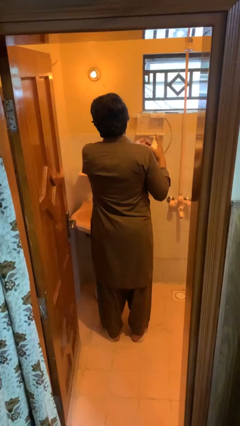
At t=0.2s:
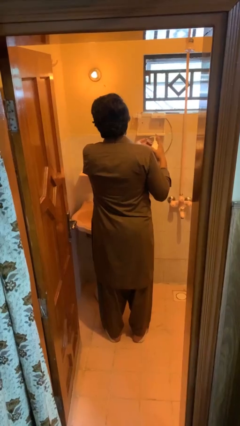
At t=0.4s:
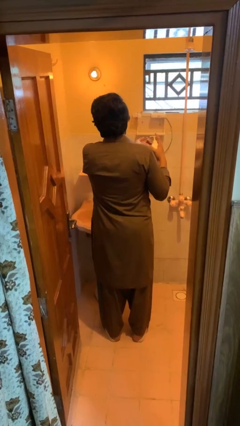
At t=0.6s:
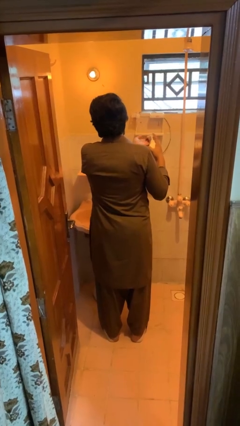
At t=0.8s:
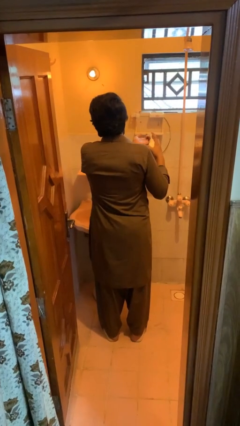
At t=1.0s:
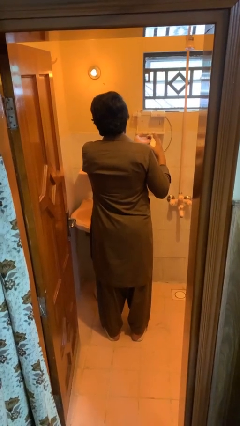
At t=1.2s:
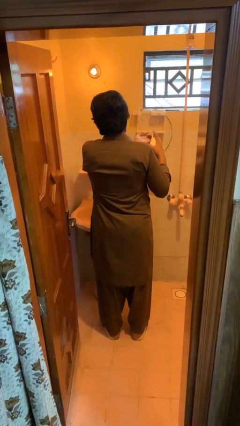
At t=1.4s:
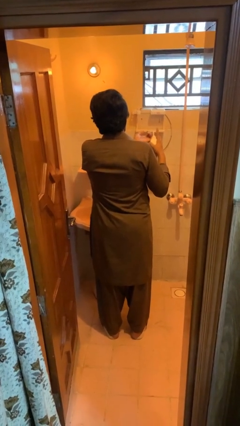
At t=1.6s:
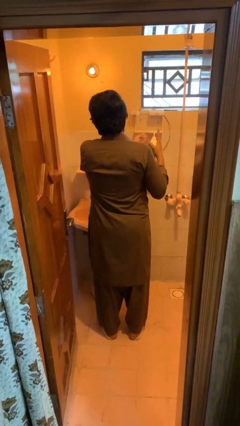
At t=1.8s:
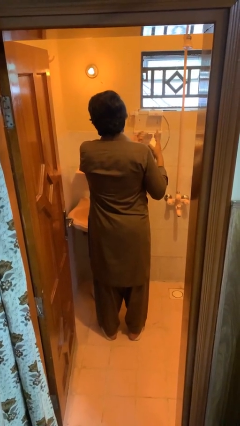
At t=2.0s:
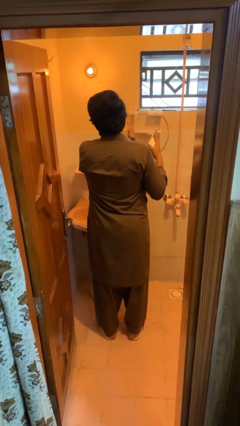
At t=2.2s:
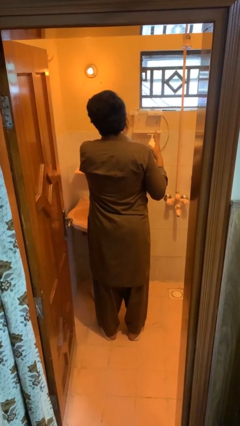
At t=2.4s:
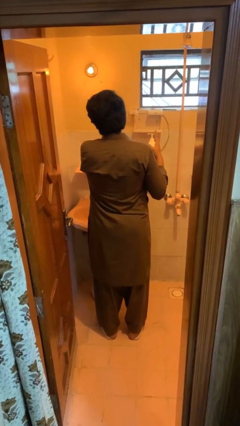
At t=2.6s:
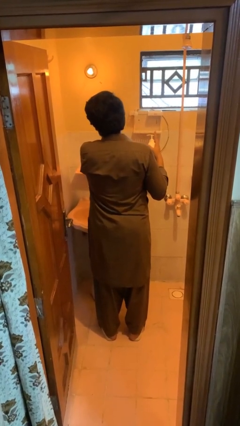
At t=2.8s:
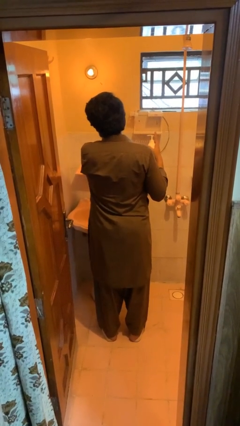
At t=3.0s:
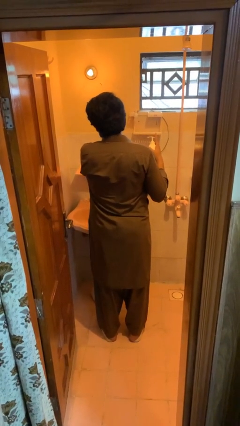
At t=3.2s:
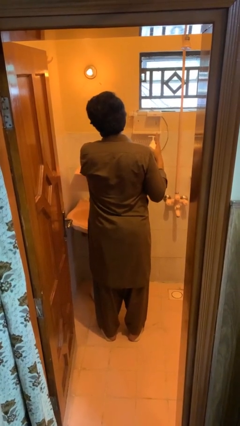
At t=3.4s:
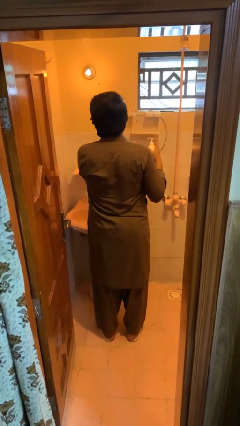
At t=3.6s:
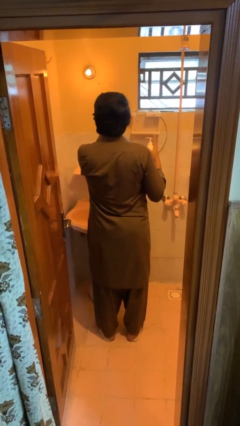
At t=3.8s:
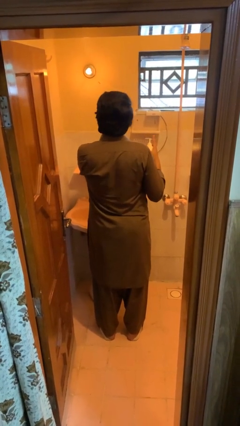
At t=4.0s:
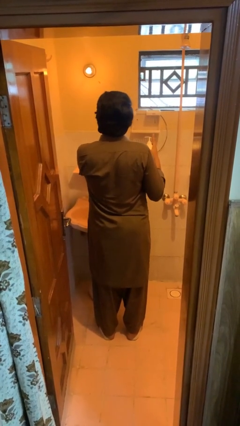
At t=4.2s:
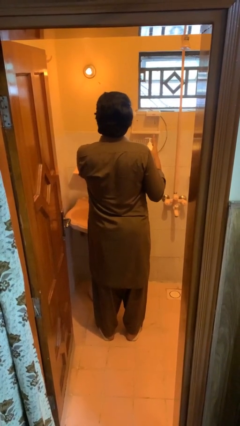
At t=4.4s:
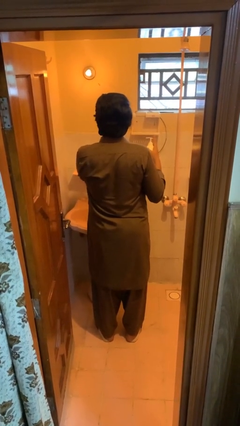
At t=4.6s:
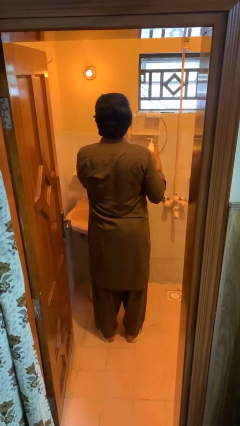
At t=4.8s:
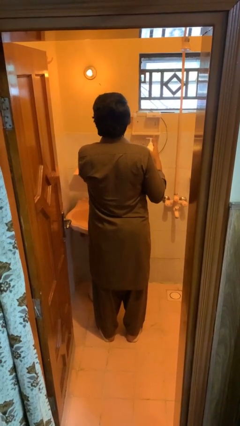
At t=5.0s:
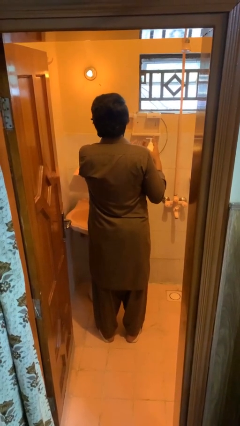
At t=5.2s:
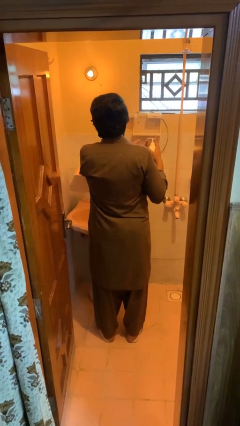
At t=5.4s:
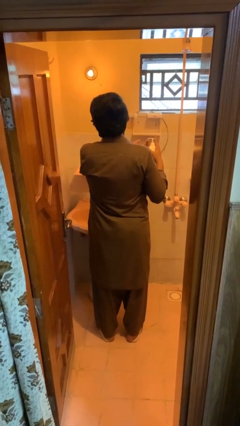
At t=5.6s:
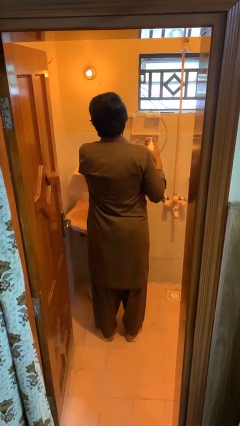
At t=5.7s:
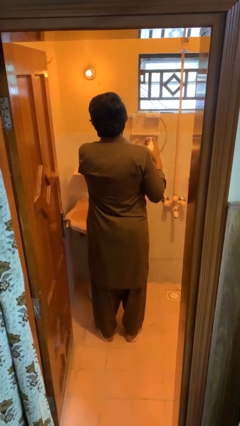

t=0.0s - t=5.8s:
person applies facial moisturizer

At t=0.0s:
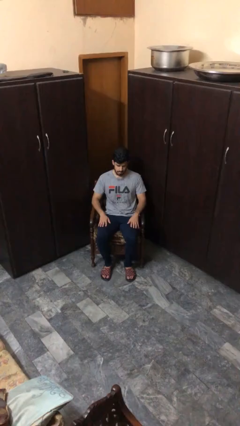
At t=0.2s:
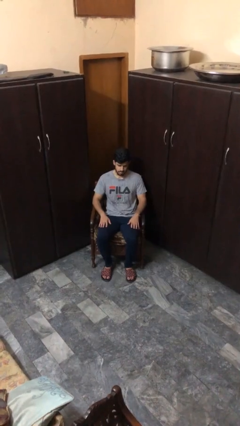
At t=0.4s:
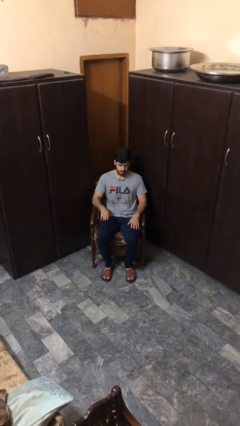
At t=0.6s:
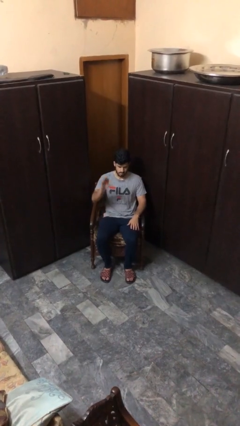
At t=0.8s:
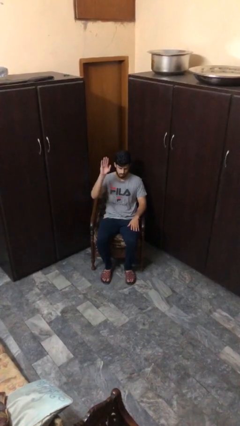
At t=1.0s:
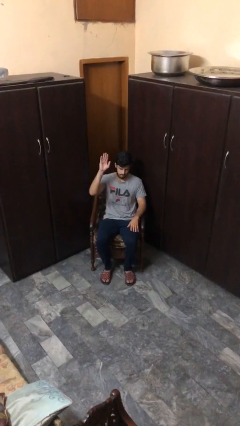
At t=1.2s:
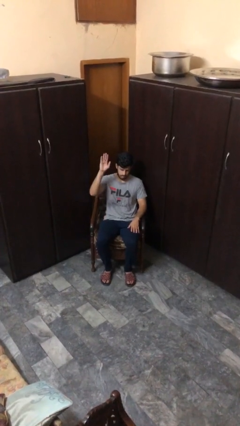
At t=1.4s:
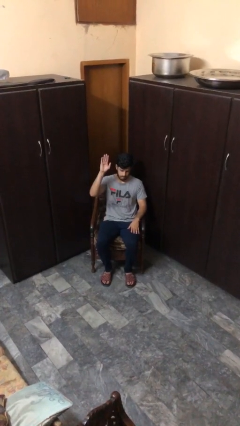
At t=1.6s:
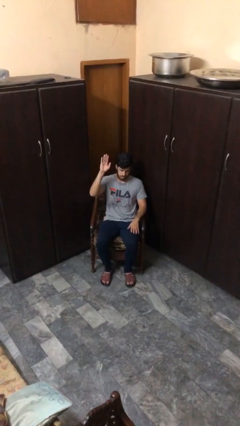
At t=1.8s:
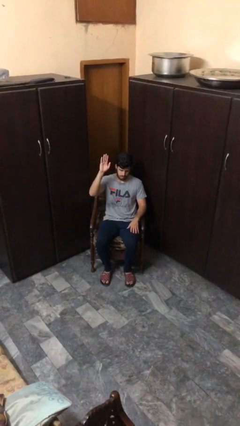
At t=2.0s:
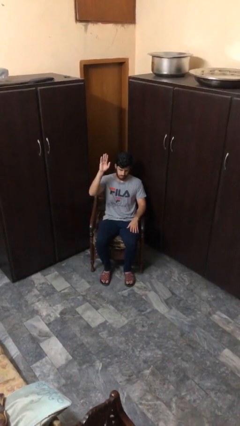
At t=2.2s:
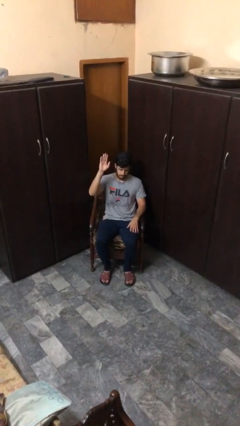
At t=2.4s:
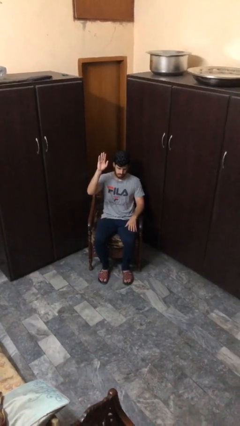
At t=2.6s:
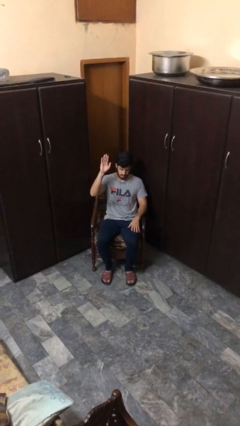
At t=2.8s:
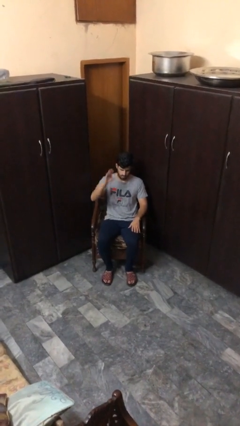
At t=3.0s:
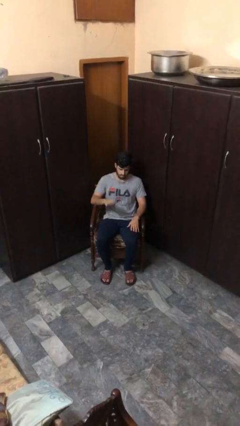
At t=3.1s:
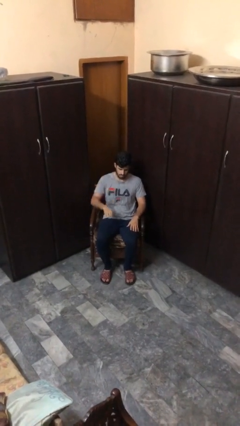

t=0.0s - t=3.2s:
person gestures raise hand

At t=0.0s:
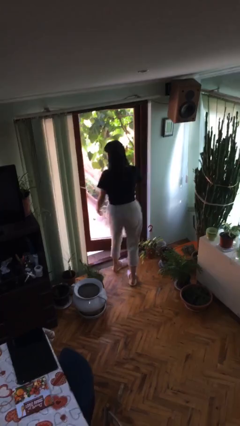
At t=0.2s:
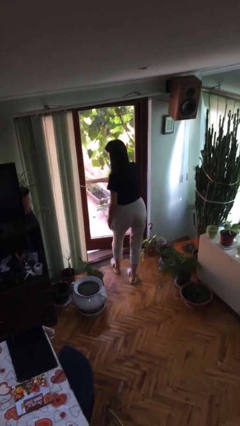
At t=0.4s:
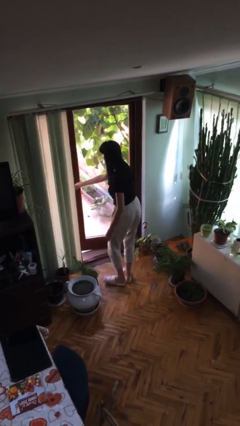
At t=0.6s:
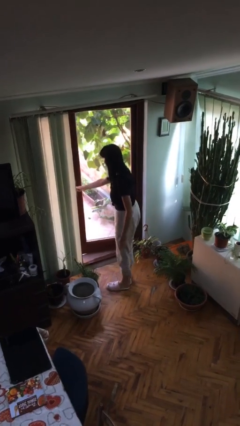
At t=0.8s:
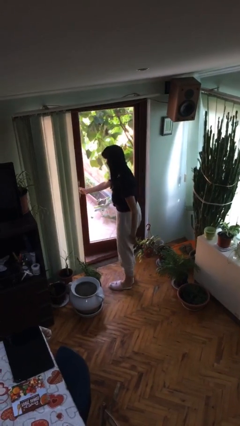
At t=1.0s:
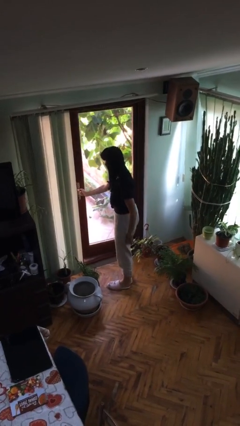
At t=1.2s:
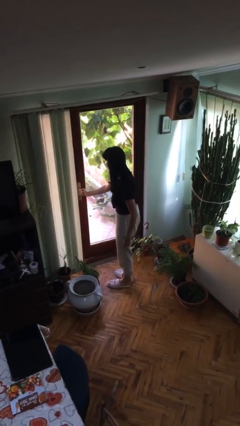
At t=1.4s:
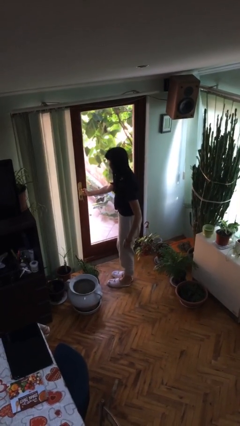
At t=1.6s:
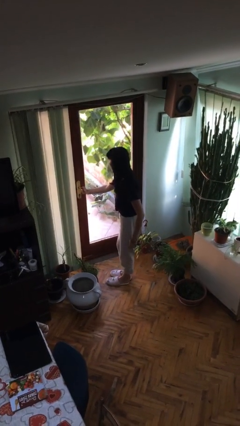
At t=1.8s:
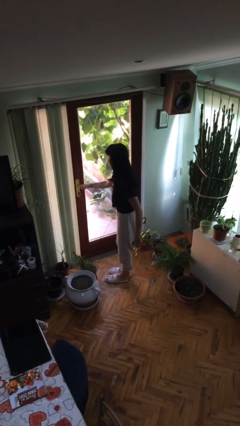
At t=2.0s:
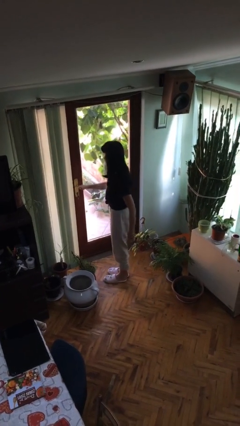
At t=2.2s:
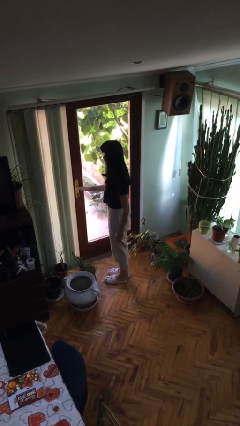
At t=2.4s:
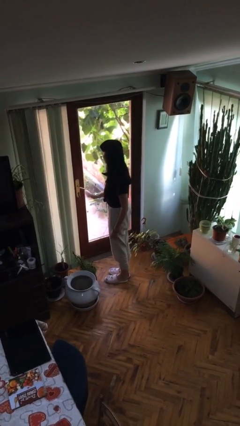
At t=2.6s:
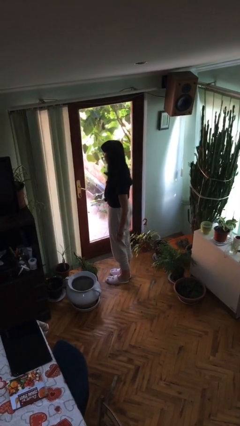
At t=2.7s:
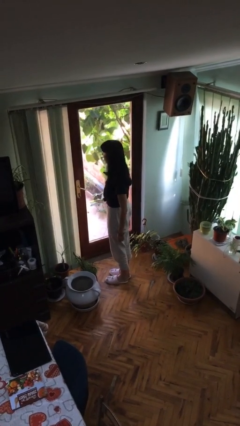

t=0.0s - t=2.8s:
person closes facility door

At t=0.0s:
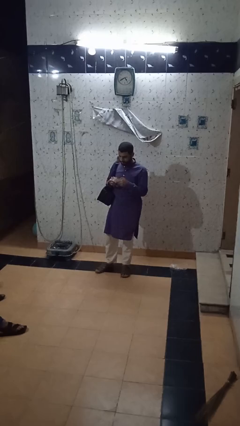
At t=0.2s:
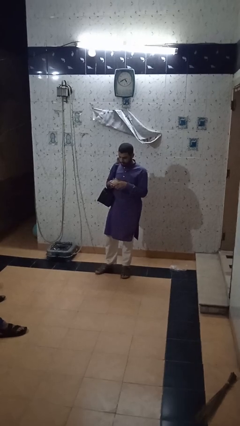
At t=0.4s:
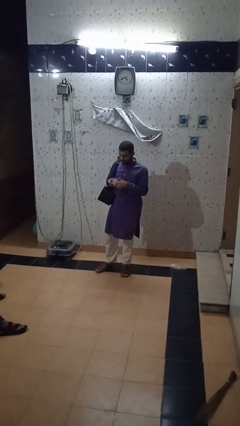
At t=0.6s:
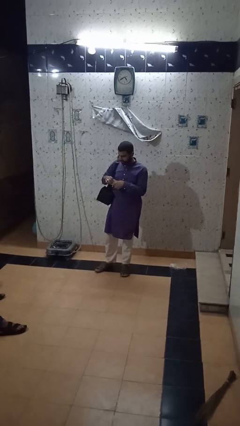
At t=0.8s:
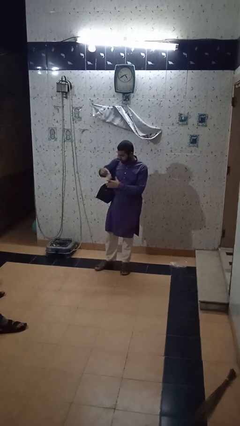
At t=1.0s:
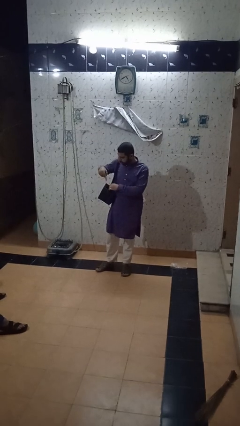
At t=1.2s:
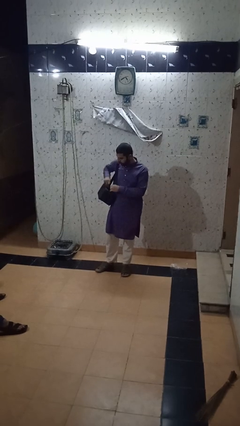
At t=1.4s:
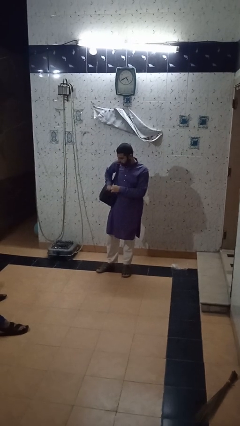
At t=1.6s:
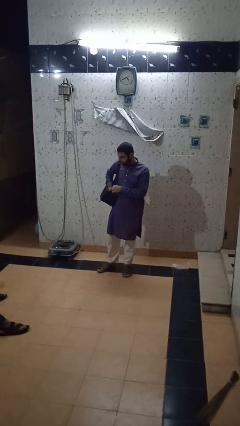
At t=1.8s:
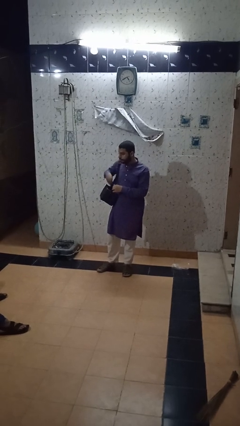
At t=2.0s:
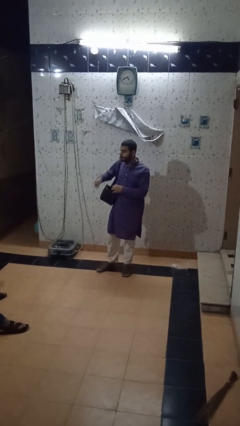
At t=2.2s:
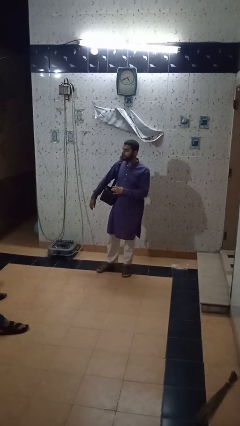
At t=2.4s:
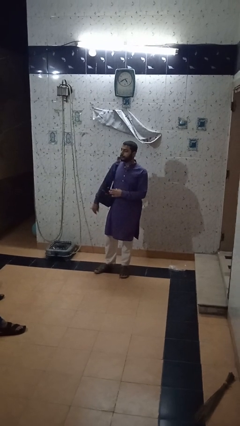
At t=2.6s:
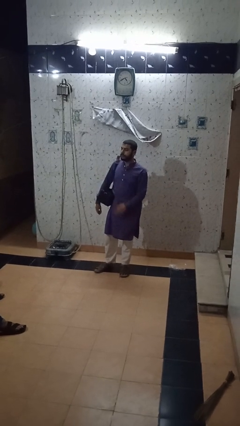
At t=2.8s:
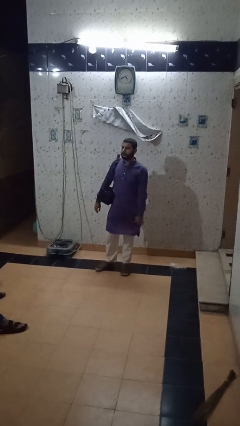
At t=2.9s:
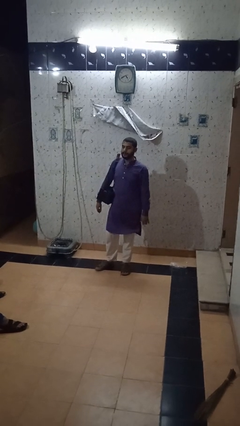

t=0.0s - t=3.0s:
person puts object into backpack

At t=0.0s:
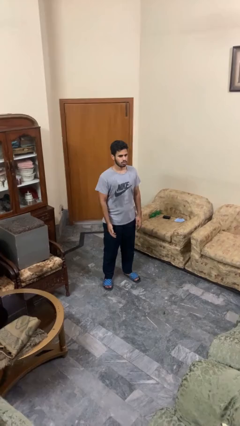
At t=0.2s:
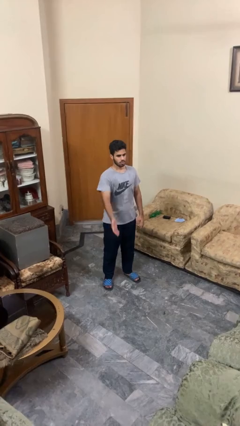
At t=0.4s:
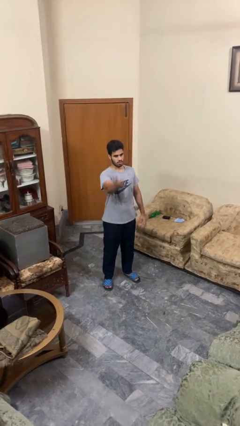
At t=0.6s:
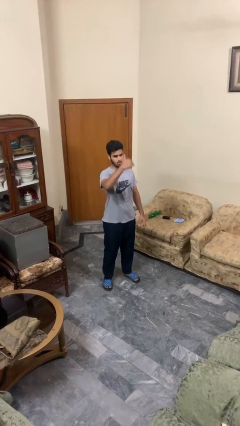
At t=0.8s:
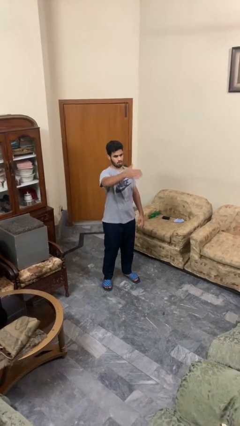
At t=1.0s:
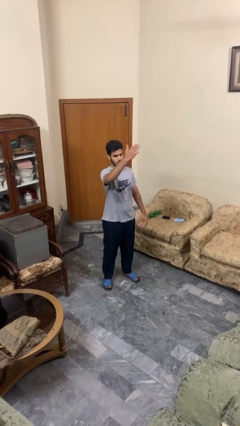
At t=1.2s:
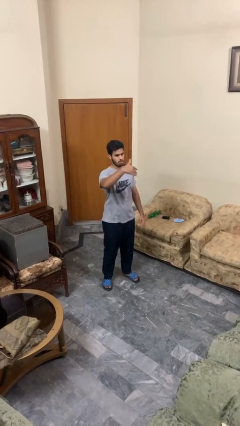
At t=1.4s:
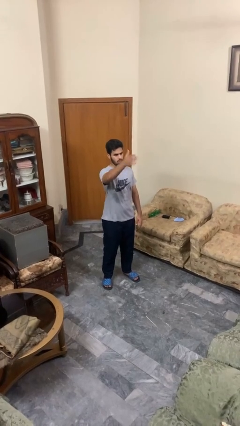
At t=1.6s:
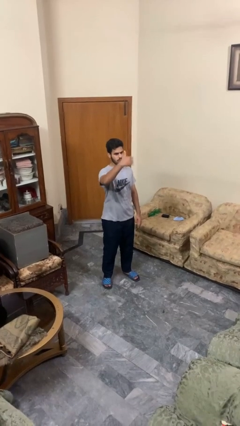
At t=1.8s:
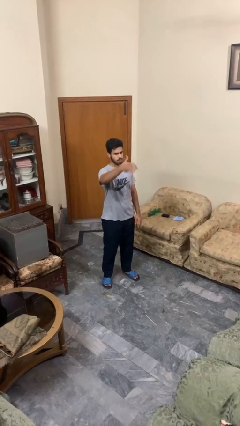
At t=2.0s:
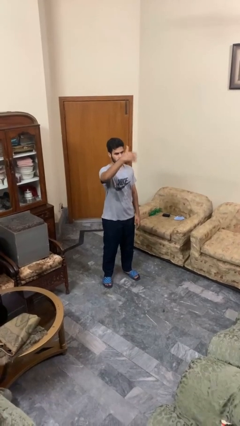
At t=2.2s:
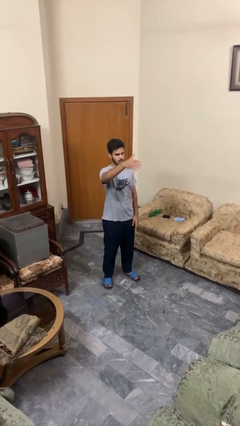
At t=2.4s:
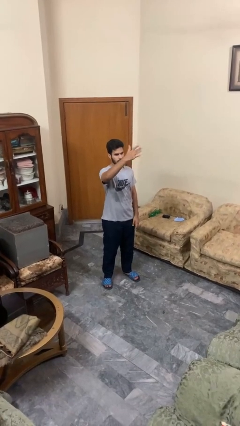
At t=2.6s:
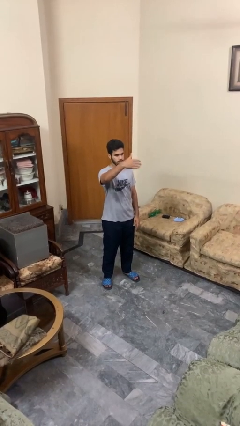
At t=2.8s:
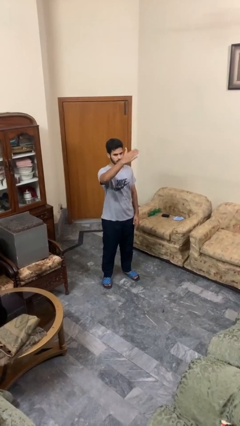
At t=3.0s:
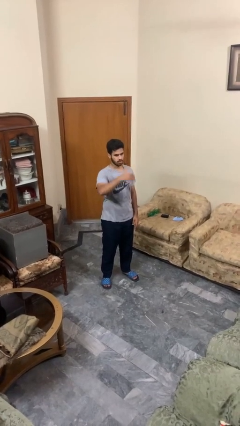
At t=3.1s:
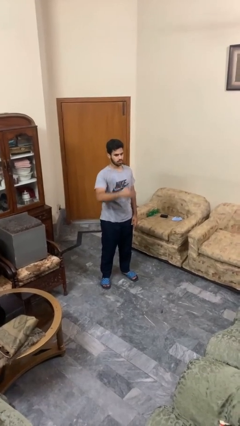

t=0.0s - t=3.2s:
person gestures come here
